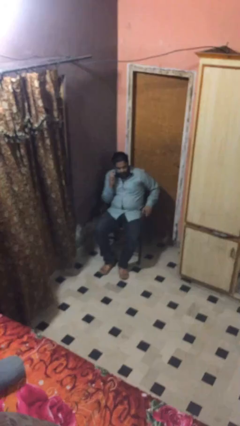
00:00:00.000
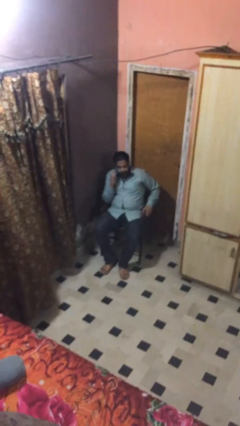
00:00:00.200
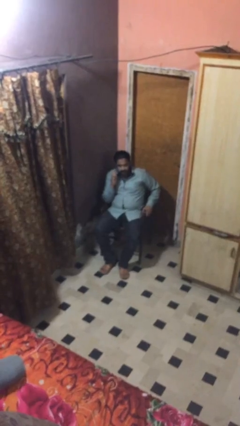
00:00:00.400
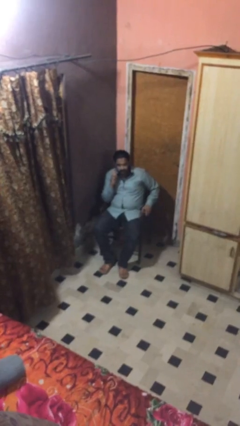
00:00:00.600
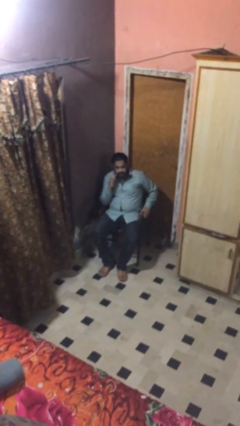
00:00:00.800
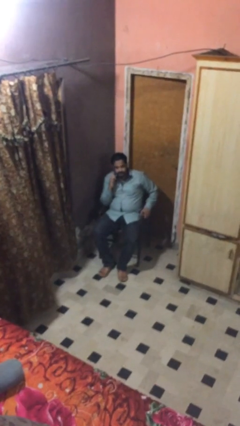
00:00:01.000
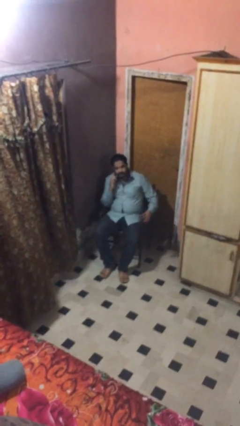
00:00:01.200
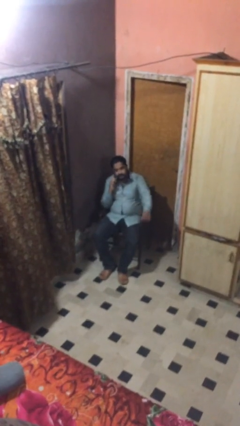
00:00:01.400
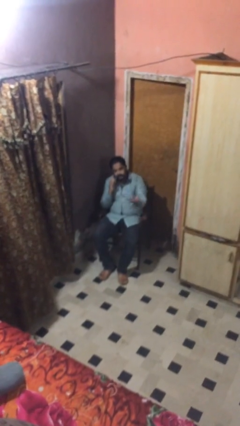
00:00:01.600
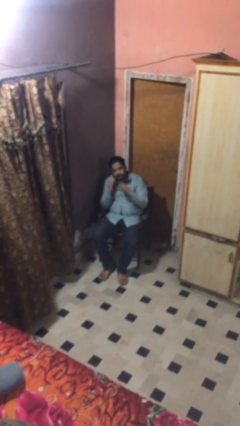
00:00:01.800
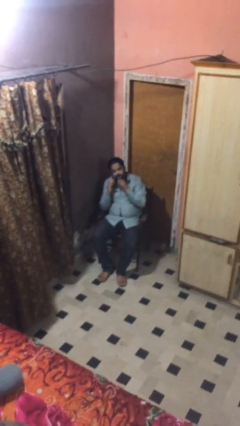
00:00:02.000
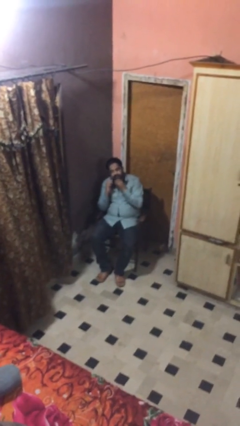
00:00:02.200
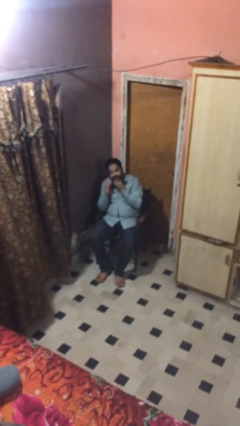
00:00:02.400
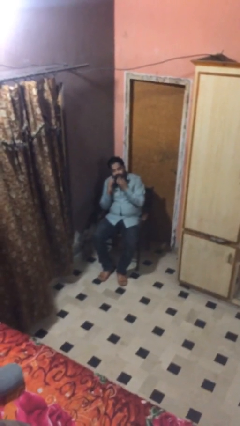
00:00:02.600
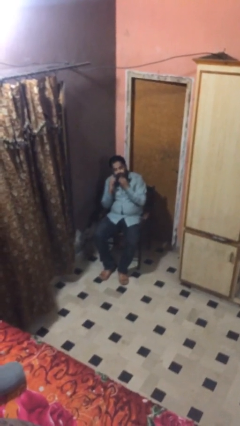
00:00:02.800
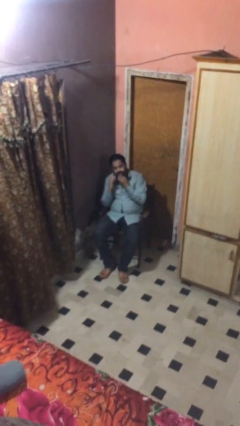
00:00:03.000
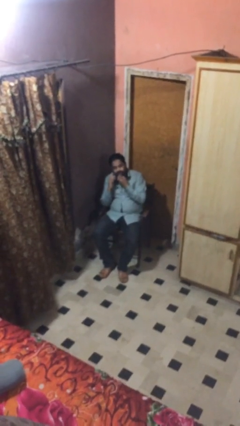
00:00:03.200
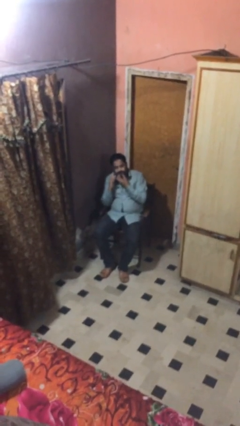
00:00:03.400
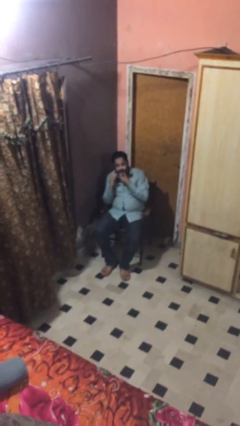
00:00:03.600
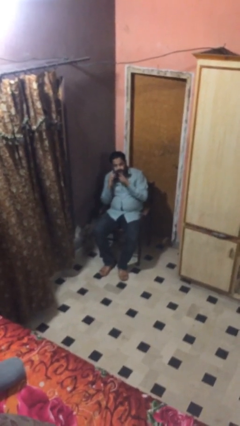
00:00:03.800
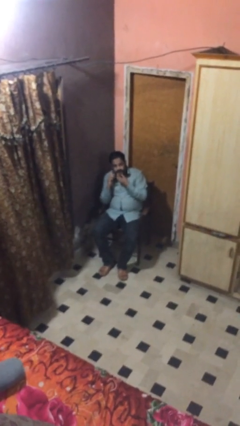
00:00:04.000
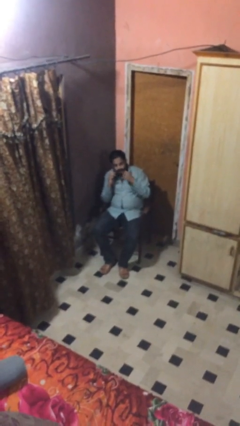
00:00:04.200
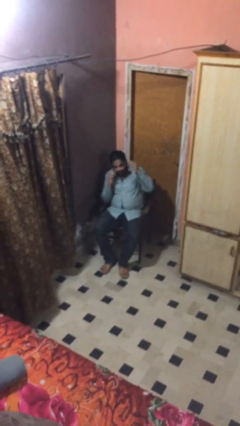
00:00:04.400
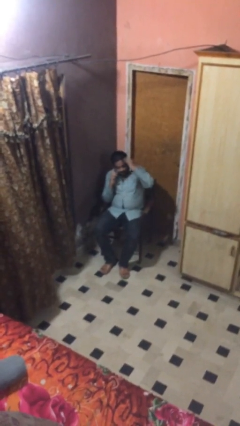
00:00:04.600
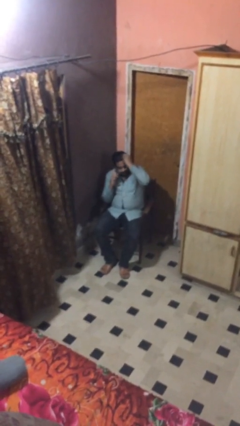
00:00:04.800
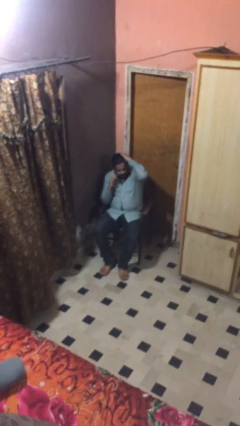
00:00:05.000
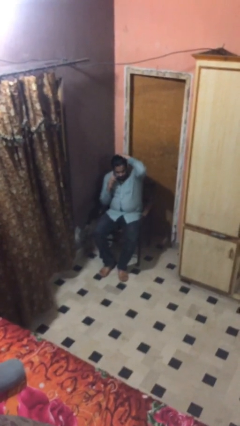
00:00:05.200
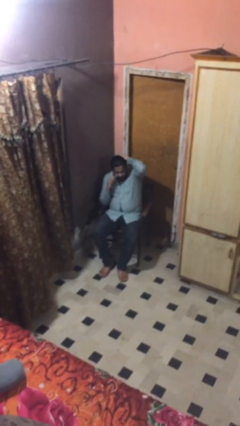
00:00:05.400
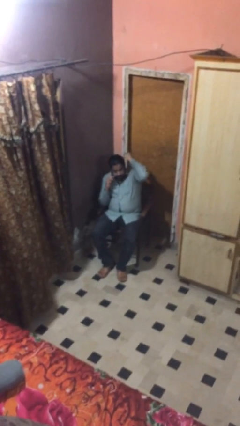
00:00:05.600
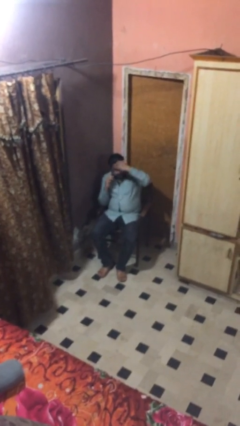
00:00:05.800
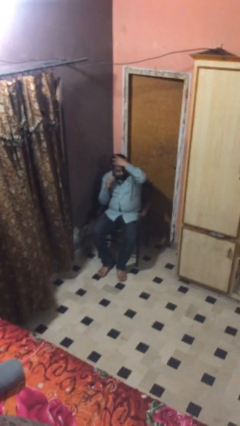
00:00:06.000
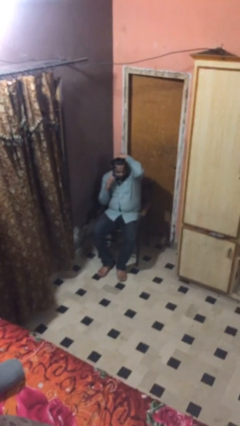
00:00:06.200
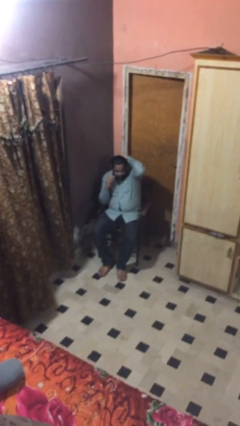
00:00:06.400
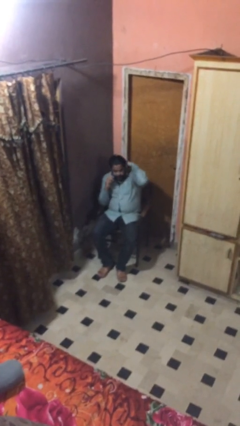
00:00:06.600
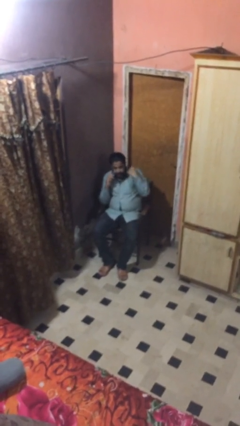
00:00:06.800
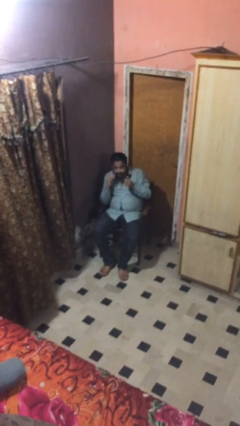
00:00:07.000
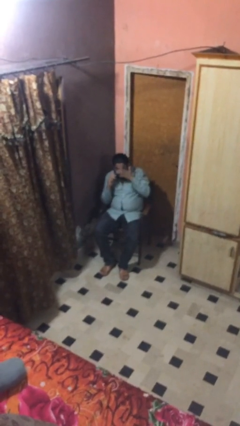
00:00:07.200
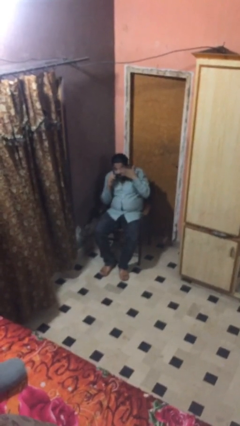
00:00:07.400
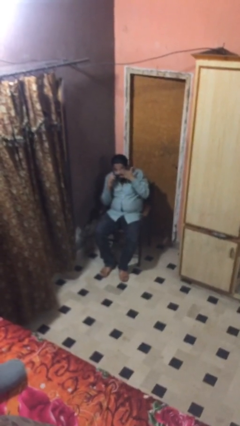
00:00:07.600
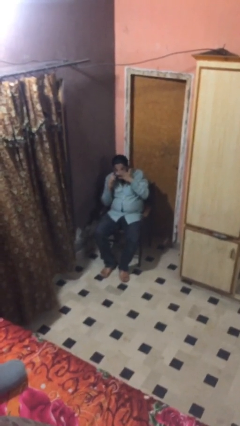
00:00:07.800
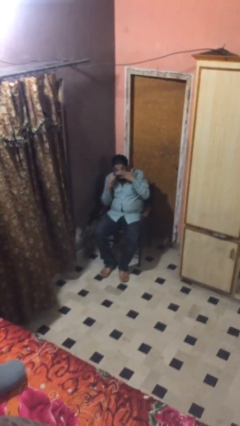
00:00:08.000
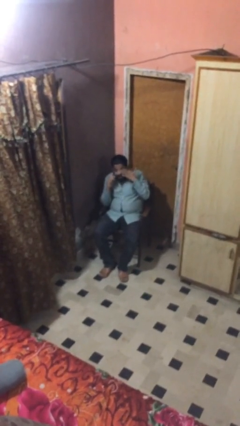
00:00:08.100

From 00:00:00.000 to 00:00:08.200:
person talks on phone

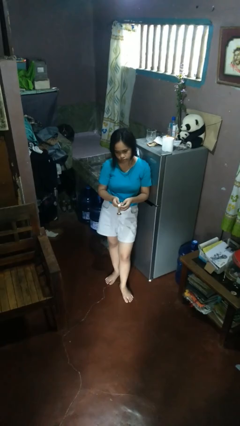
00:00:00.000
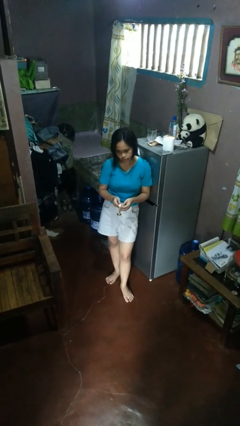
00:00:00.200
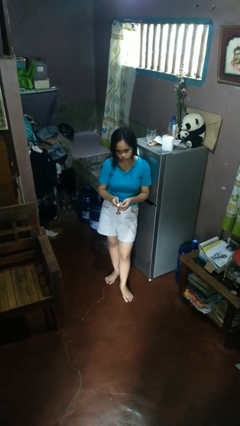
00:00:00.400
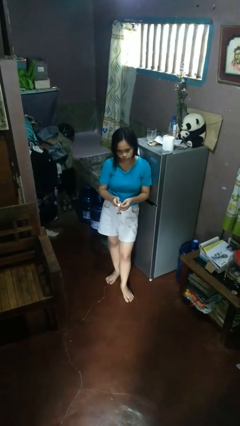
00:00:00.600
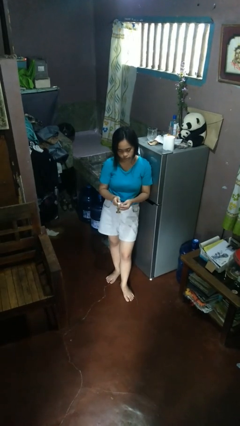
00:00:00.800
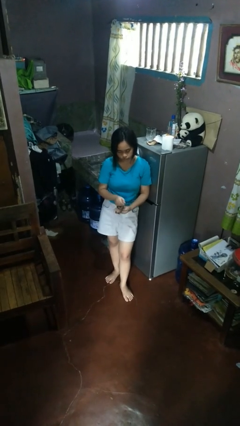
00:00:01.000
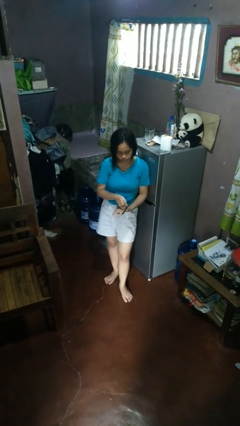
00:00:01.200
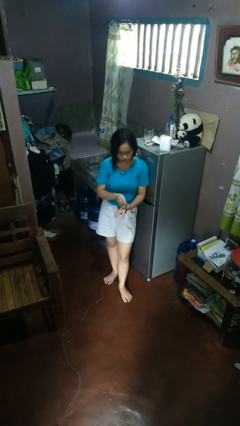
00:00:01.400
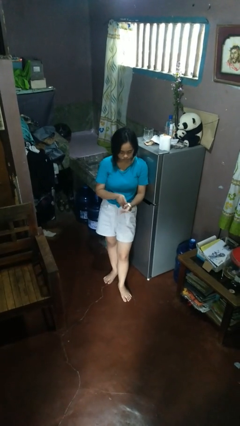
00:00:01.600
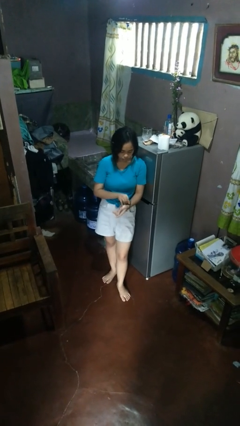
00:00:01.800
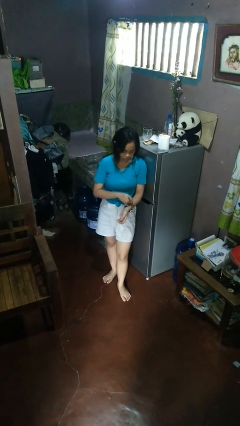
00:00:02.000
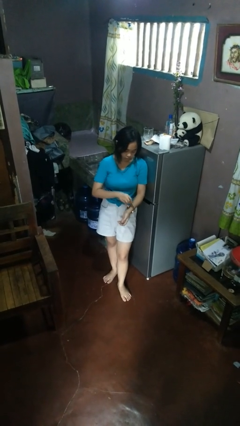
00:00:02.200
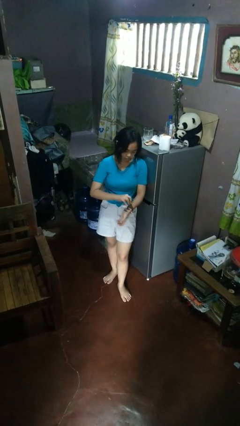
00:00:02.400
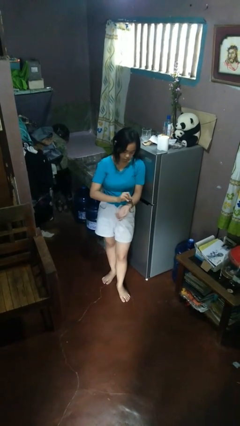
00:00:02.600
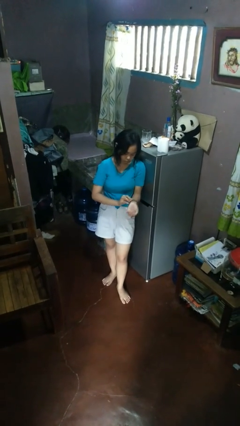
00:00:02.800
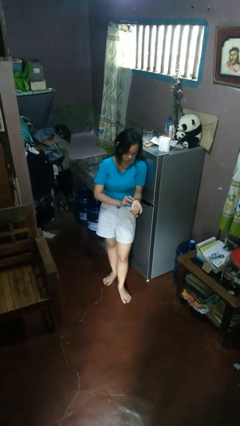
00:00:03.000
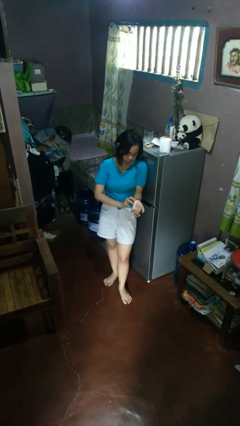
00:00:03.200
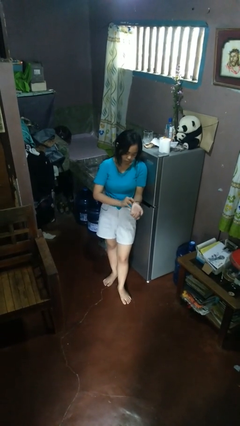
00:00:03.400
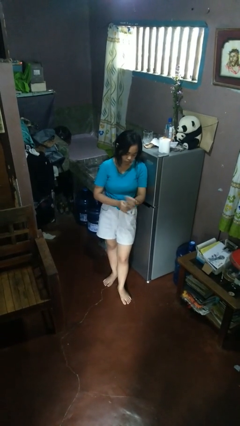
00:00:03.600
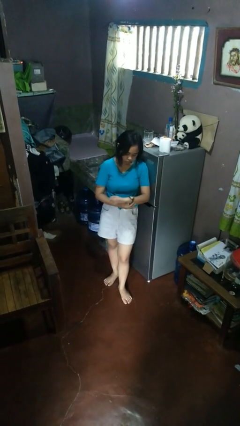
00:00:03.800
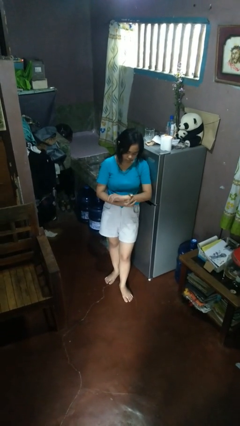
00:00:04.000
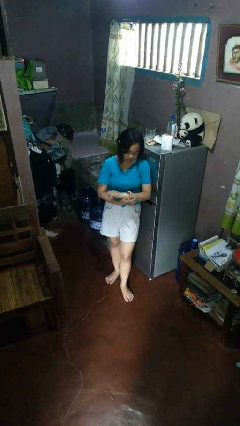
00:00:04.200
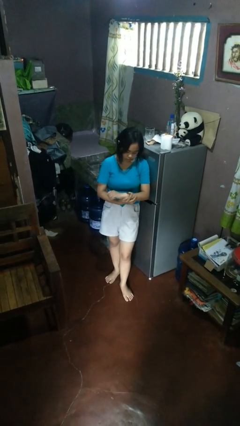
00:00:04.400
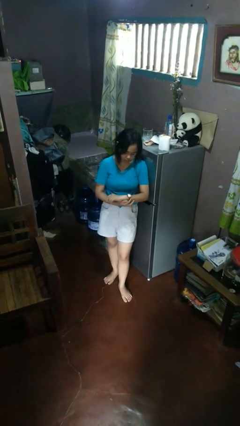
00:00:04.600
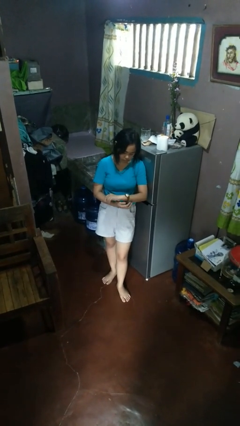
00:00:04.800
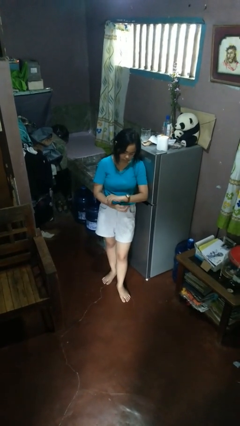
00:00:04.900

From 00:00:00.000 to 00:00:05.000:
person puts on wristwatch

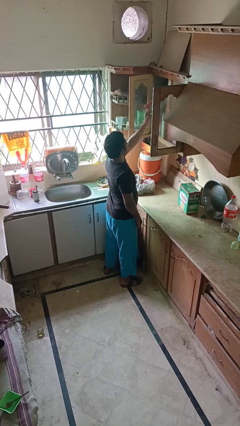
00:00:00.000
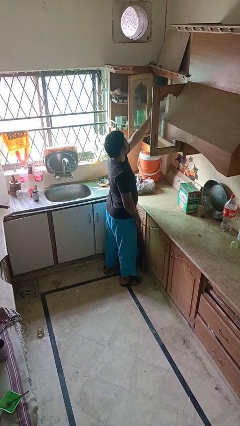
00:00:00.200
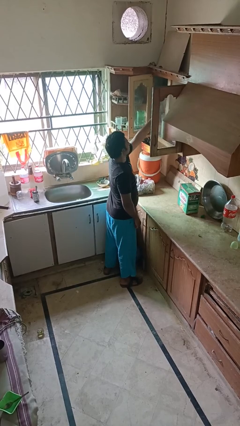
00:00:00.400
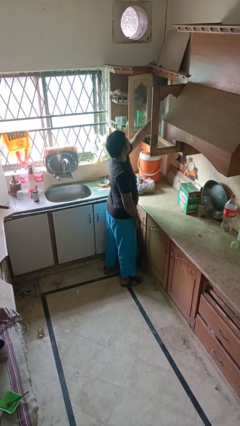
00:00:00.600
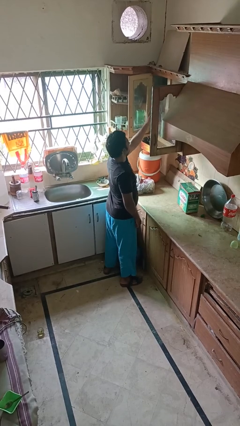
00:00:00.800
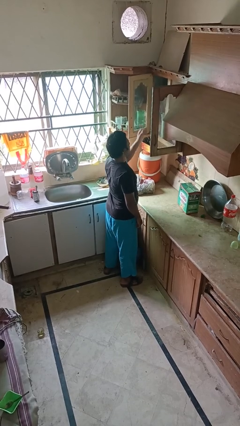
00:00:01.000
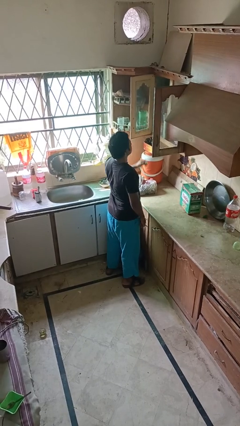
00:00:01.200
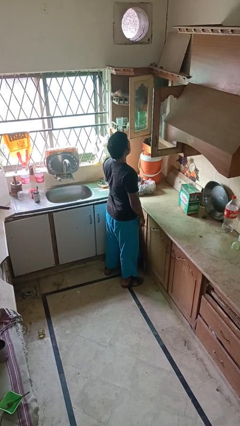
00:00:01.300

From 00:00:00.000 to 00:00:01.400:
person puts down object into cabinet

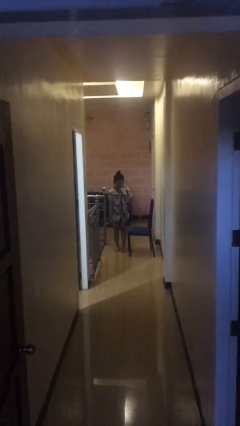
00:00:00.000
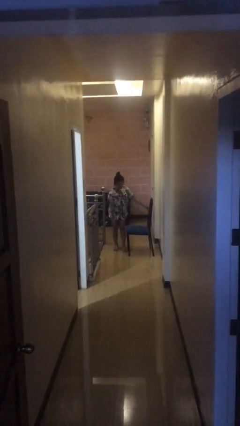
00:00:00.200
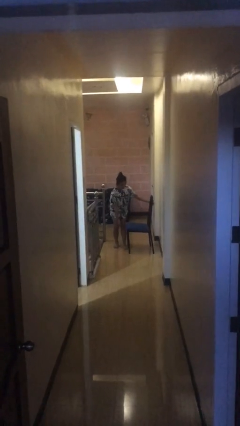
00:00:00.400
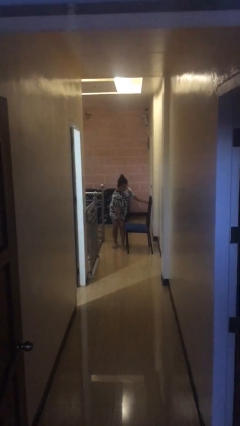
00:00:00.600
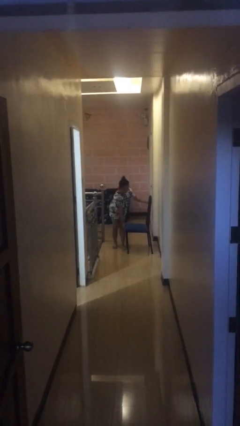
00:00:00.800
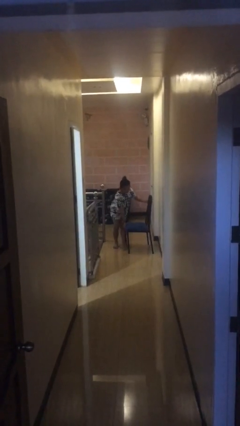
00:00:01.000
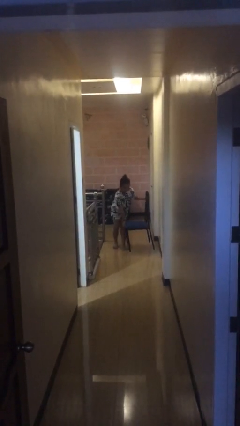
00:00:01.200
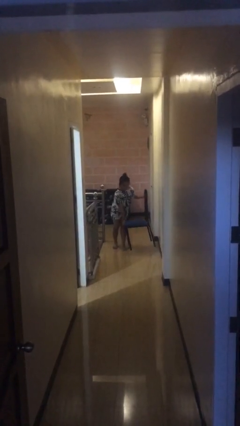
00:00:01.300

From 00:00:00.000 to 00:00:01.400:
person picks up object from floor

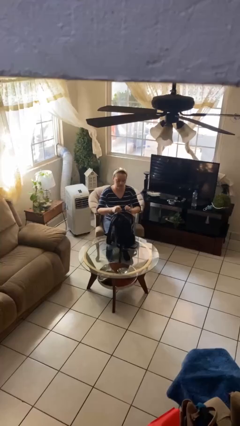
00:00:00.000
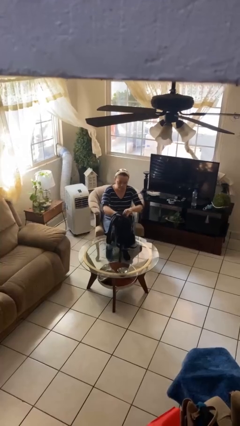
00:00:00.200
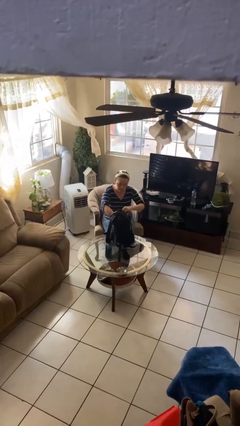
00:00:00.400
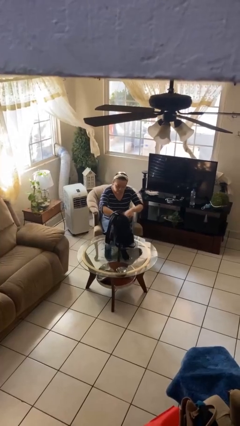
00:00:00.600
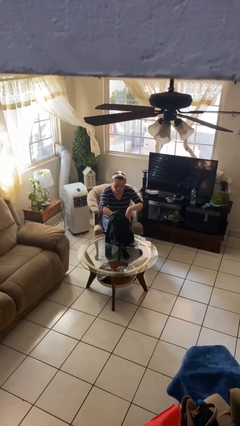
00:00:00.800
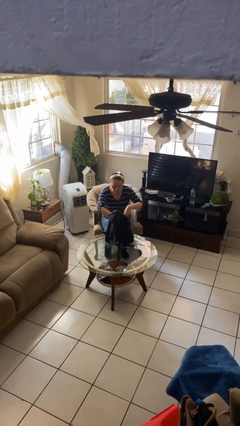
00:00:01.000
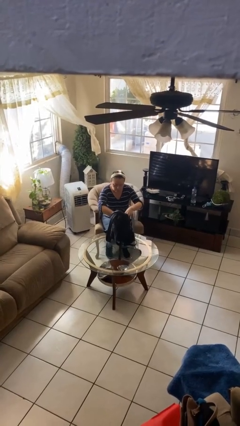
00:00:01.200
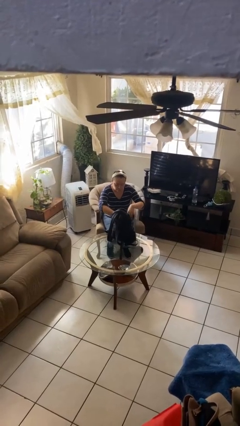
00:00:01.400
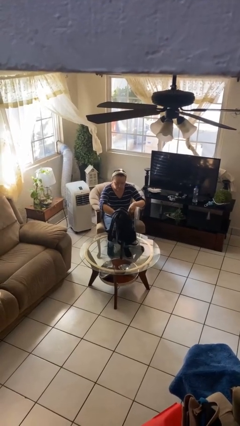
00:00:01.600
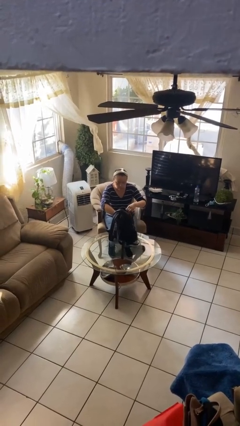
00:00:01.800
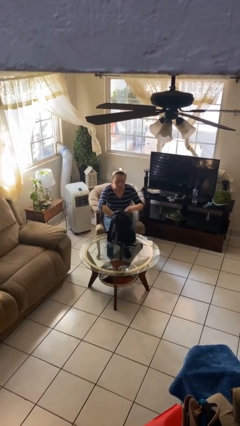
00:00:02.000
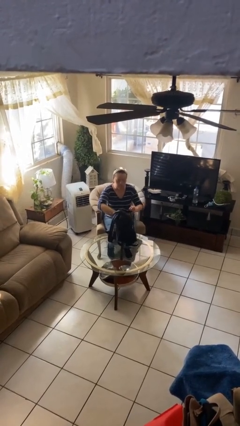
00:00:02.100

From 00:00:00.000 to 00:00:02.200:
person searches in backpack
